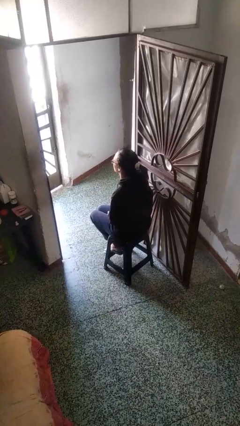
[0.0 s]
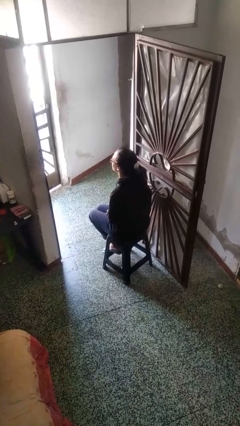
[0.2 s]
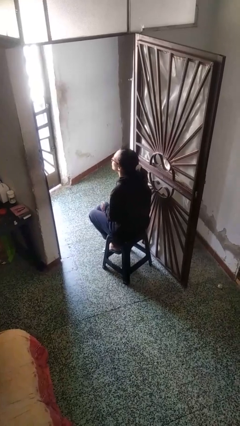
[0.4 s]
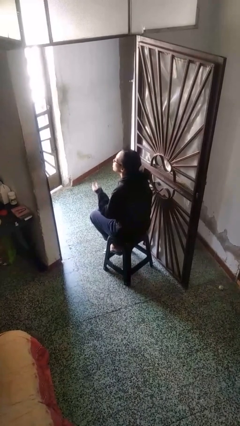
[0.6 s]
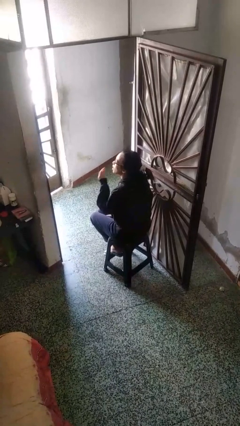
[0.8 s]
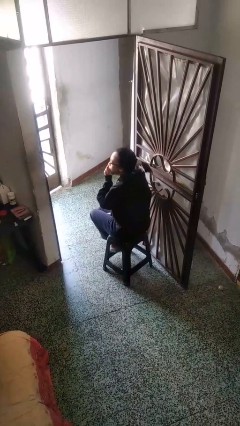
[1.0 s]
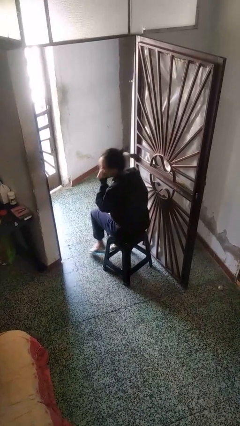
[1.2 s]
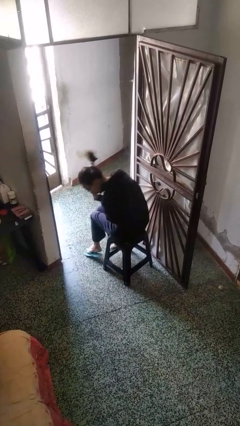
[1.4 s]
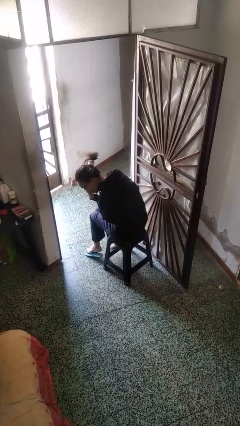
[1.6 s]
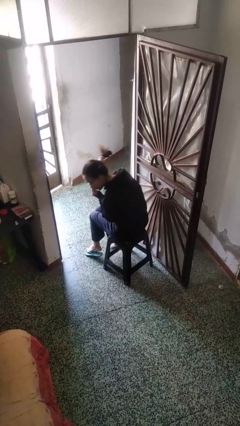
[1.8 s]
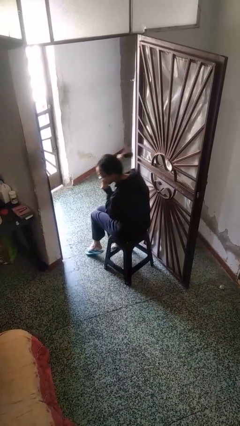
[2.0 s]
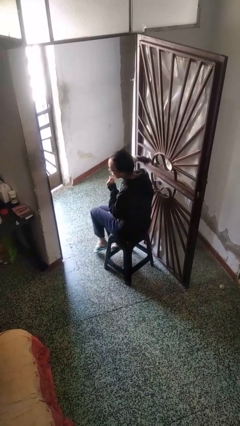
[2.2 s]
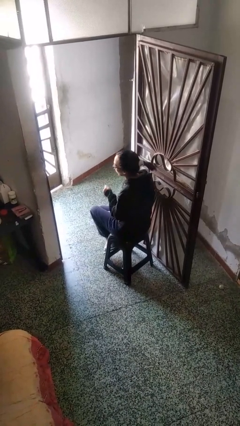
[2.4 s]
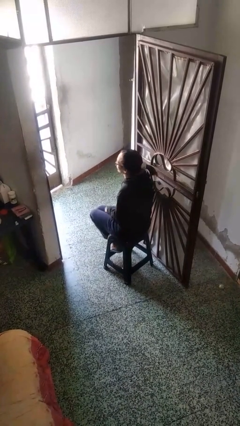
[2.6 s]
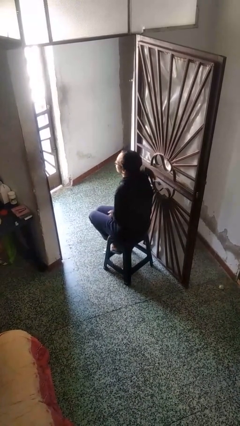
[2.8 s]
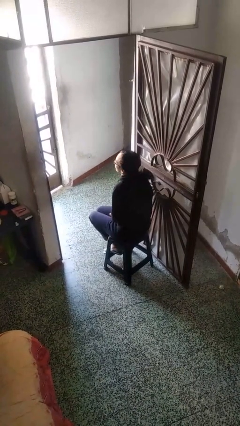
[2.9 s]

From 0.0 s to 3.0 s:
person sneezes into hand

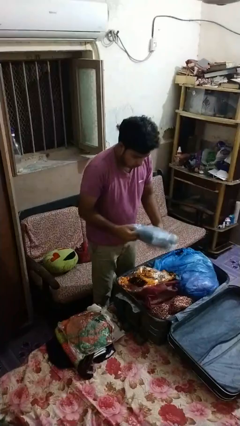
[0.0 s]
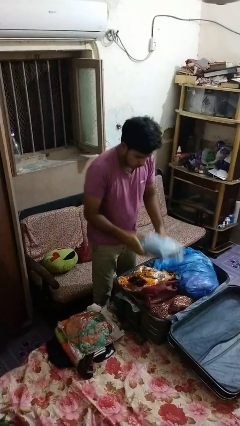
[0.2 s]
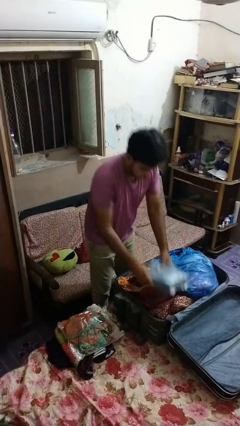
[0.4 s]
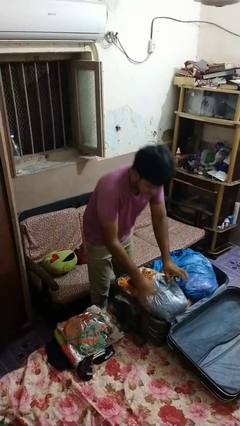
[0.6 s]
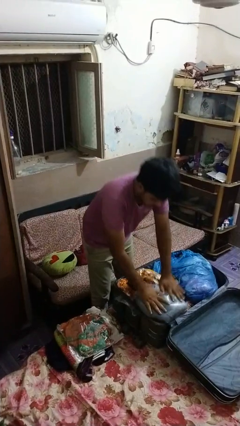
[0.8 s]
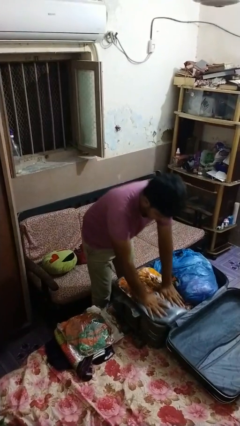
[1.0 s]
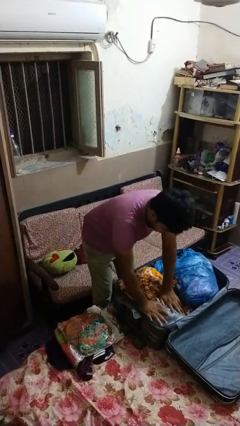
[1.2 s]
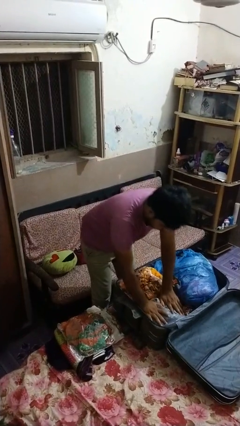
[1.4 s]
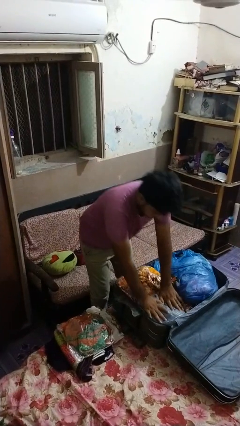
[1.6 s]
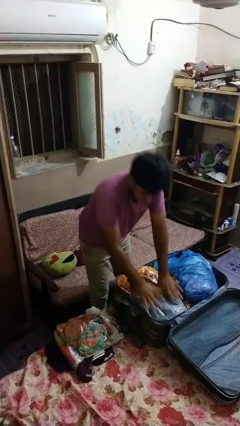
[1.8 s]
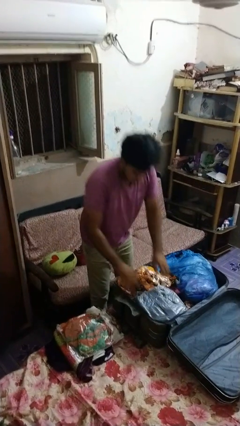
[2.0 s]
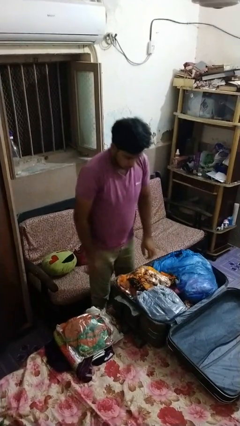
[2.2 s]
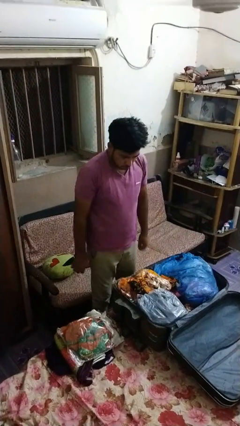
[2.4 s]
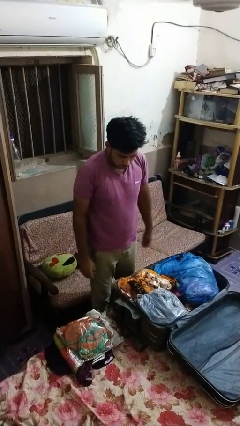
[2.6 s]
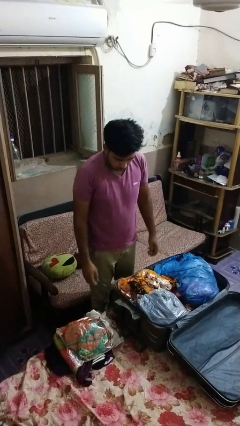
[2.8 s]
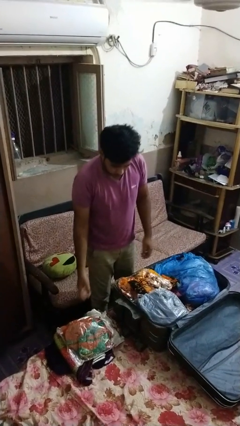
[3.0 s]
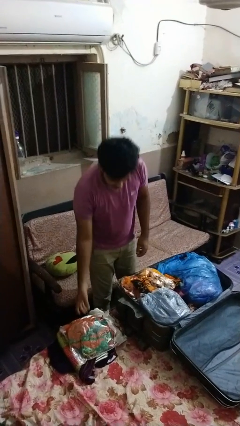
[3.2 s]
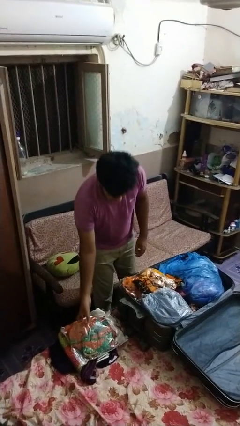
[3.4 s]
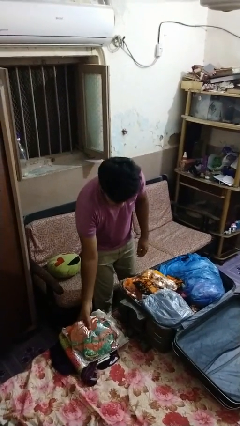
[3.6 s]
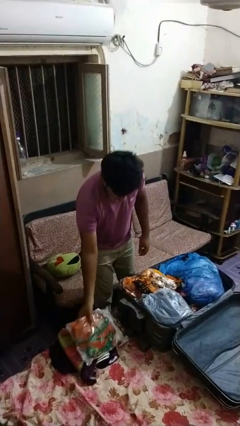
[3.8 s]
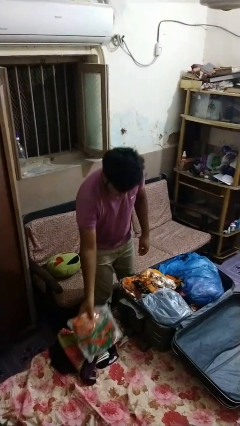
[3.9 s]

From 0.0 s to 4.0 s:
person loads clothes into suitcase

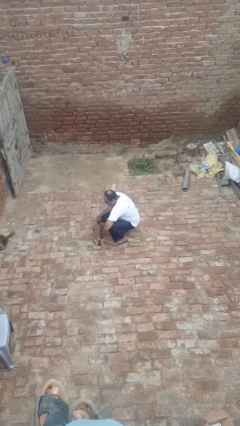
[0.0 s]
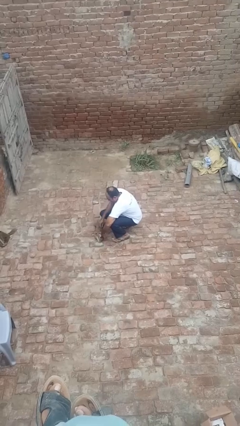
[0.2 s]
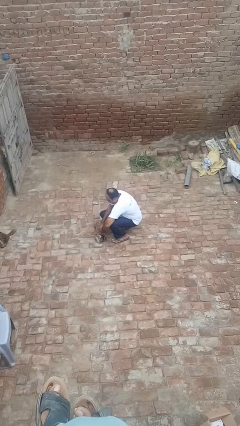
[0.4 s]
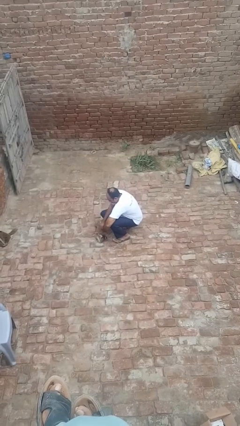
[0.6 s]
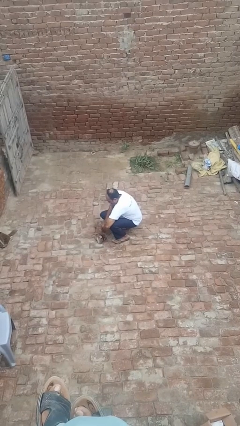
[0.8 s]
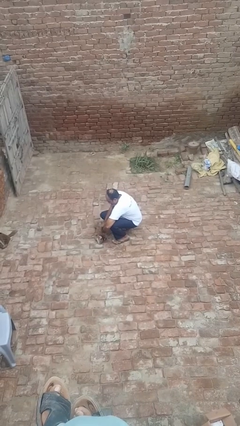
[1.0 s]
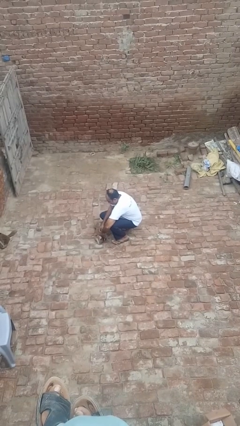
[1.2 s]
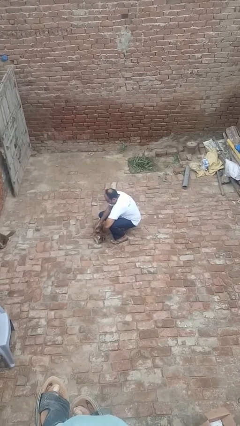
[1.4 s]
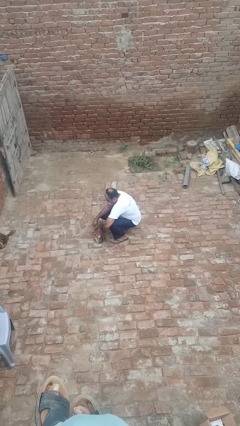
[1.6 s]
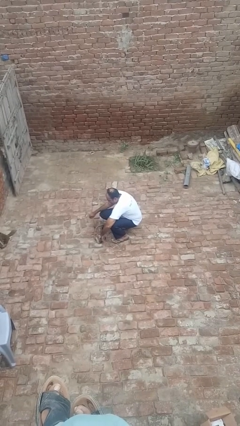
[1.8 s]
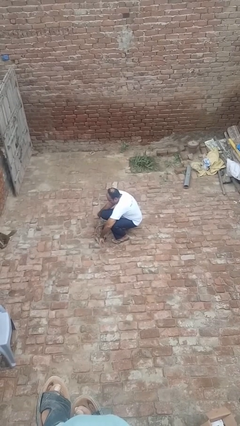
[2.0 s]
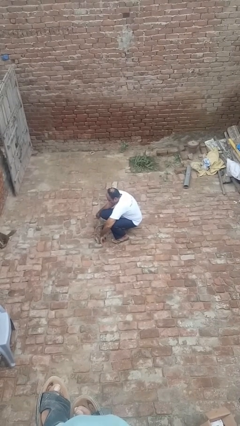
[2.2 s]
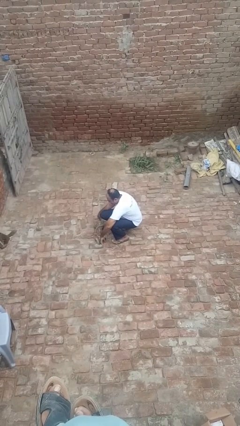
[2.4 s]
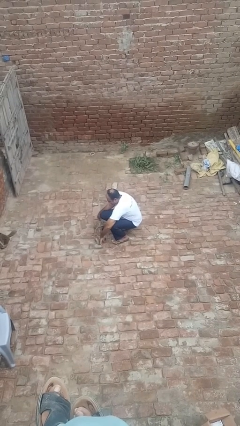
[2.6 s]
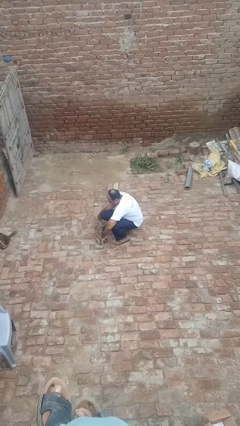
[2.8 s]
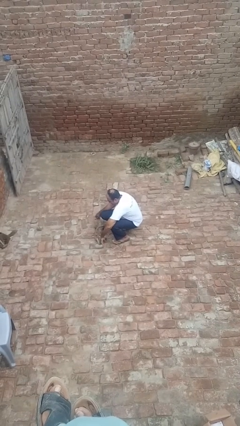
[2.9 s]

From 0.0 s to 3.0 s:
person unattaches leash from dog

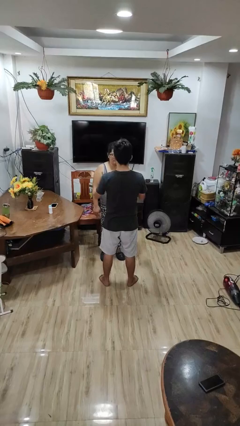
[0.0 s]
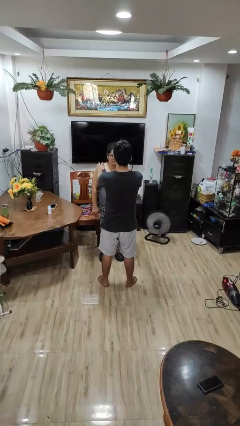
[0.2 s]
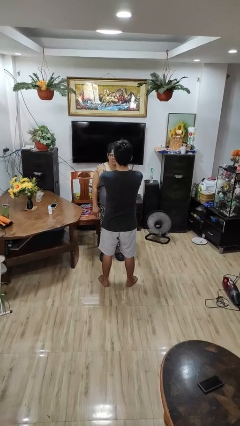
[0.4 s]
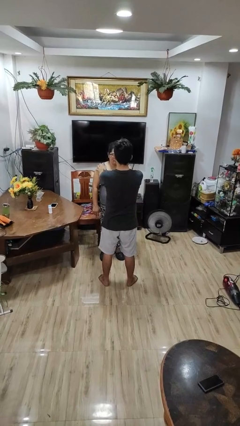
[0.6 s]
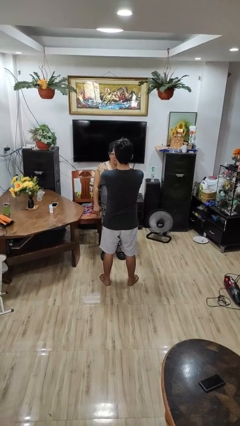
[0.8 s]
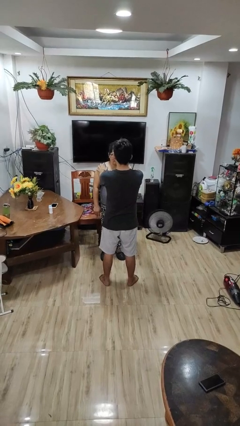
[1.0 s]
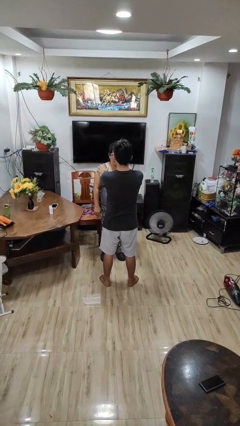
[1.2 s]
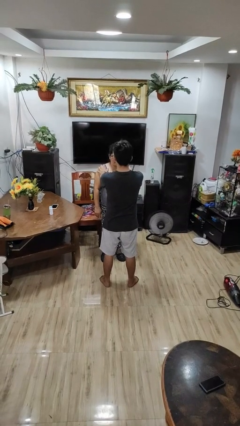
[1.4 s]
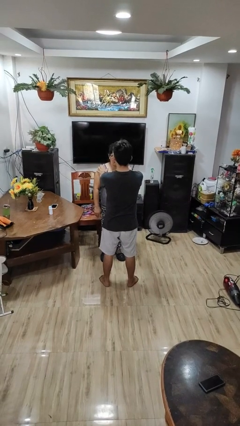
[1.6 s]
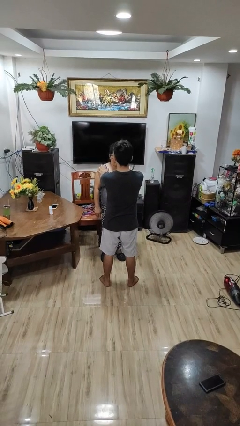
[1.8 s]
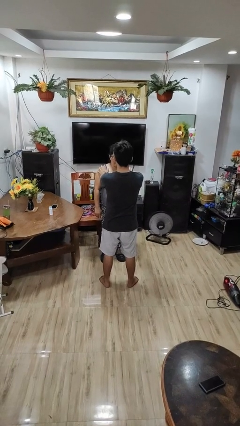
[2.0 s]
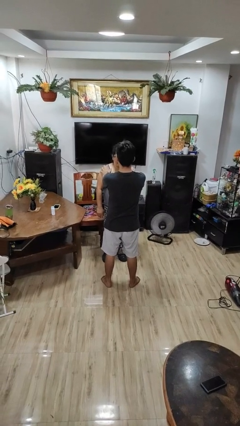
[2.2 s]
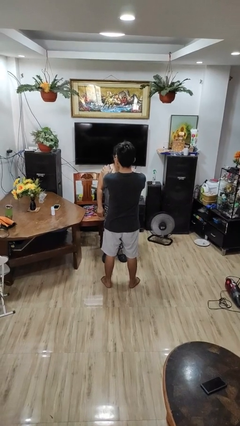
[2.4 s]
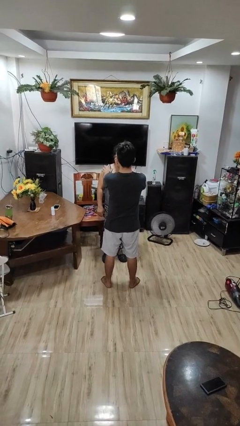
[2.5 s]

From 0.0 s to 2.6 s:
person grabs person by shoulder

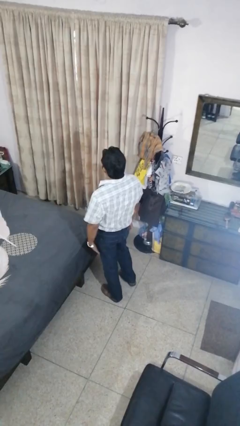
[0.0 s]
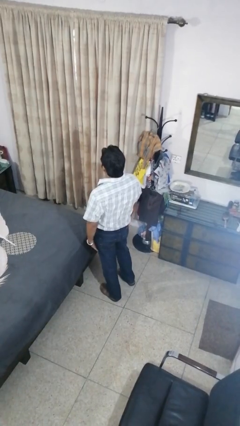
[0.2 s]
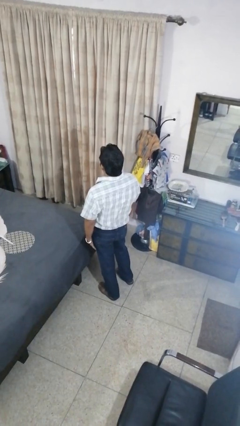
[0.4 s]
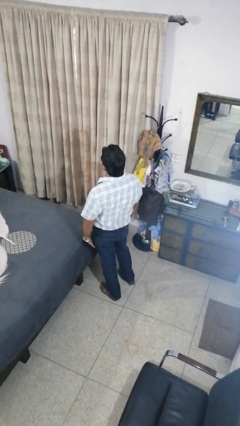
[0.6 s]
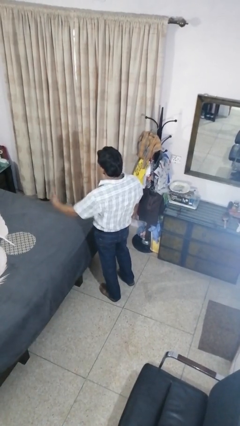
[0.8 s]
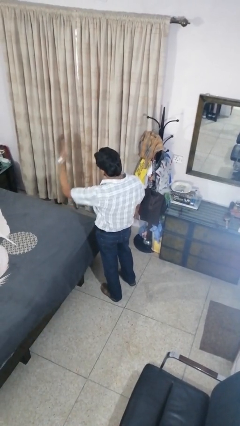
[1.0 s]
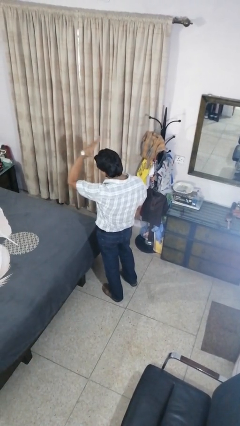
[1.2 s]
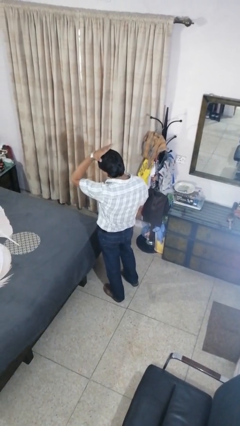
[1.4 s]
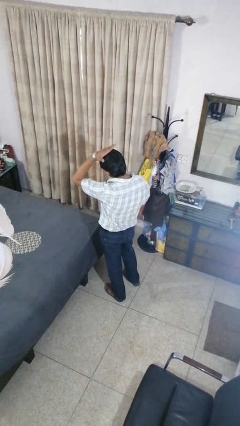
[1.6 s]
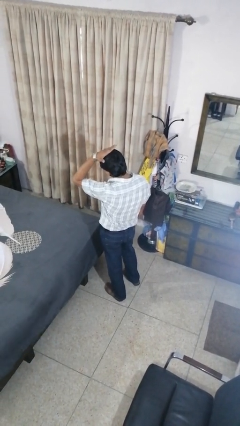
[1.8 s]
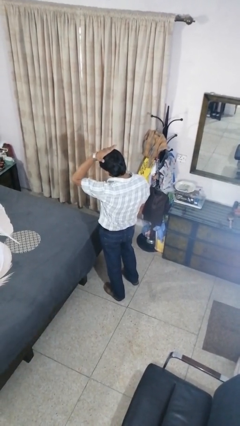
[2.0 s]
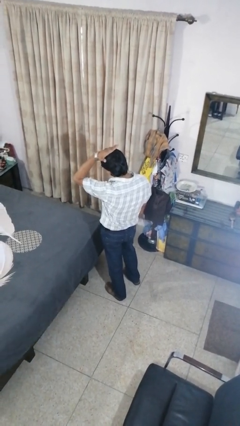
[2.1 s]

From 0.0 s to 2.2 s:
person pats head

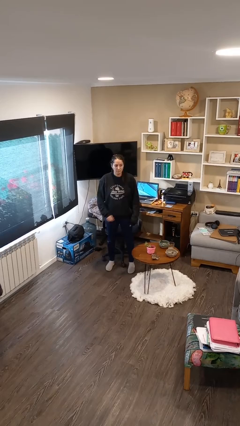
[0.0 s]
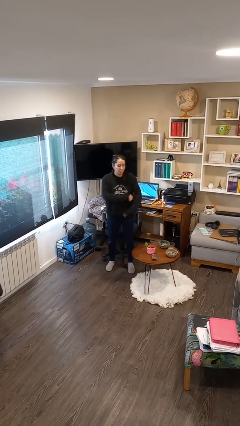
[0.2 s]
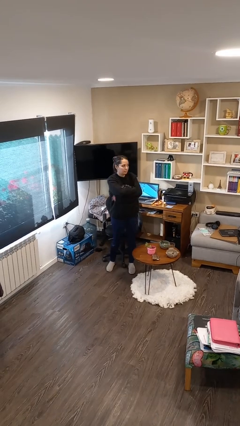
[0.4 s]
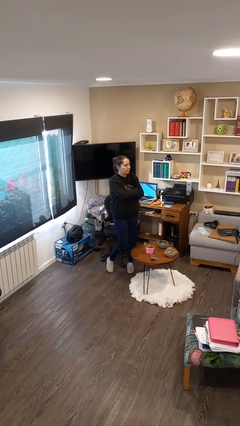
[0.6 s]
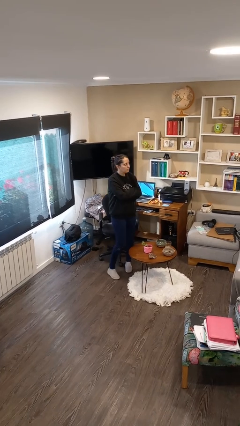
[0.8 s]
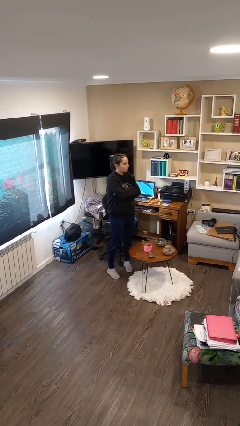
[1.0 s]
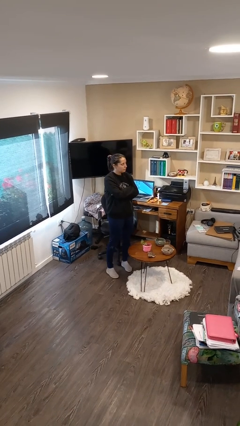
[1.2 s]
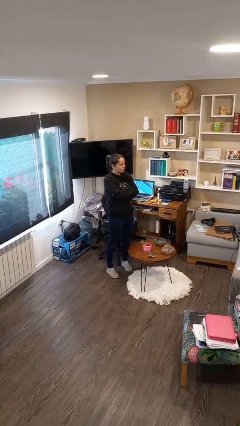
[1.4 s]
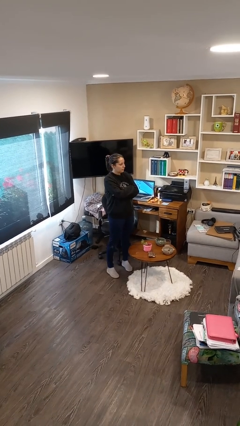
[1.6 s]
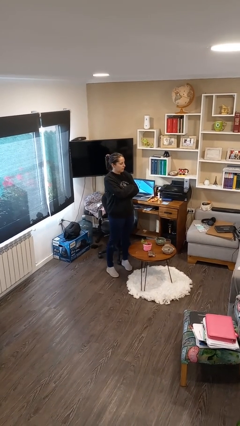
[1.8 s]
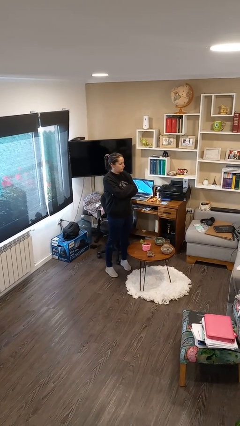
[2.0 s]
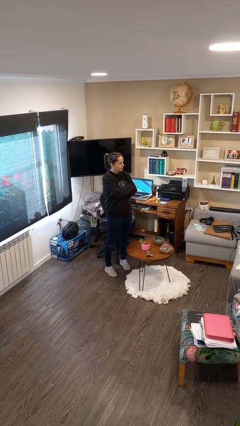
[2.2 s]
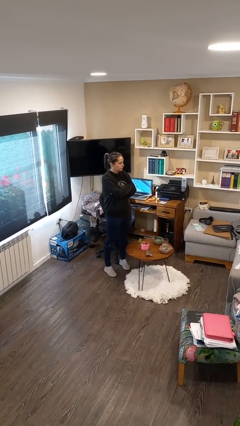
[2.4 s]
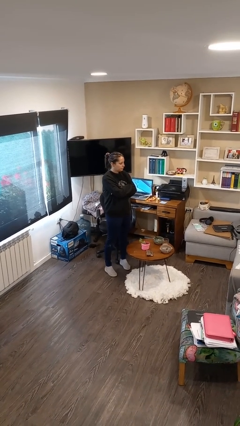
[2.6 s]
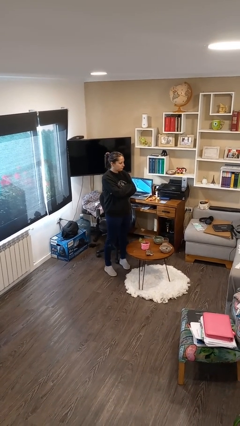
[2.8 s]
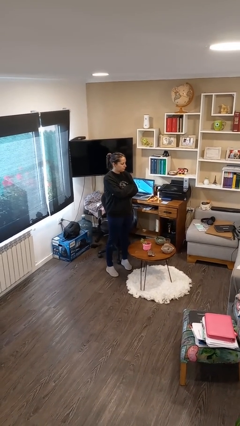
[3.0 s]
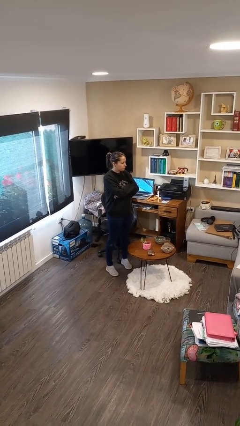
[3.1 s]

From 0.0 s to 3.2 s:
person crosses arms
